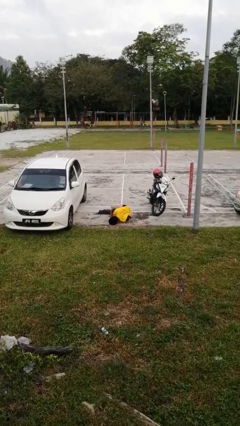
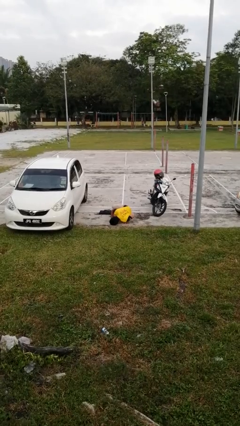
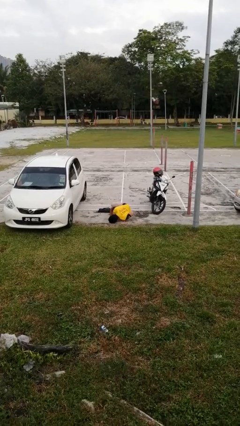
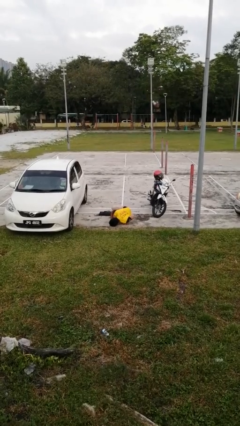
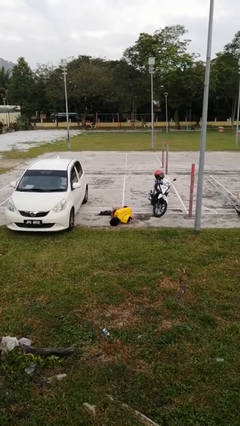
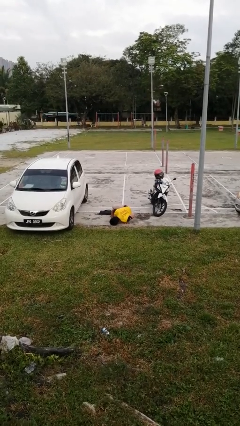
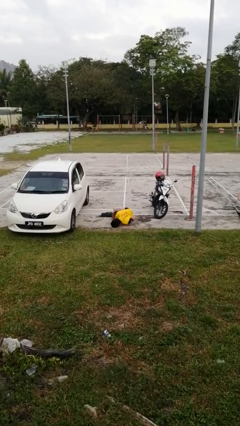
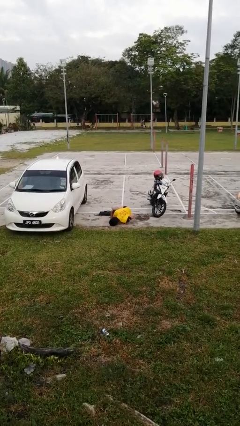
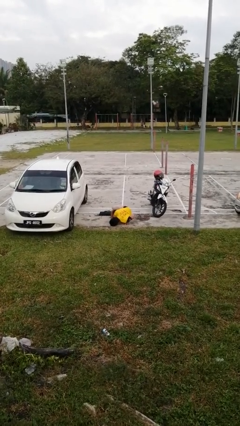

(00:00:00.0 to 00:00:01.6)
person lies down on floor

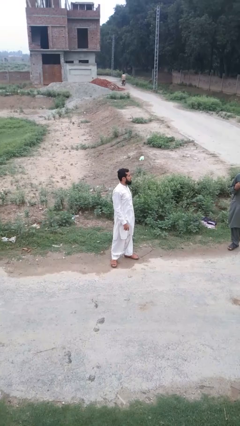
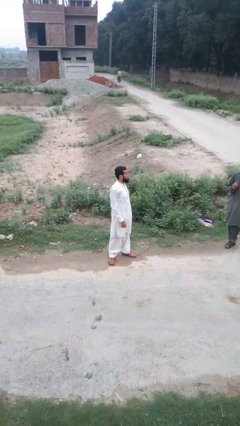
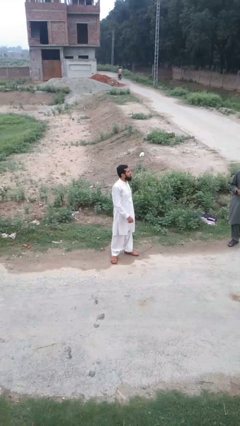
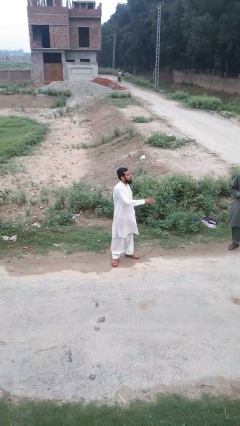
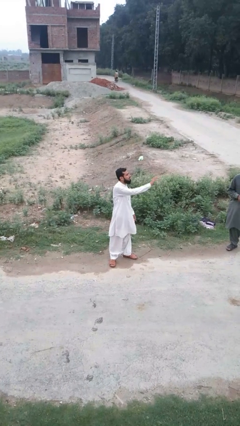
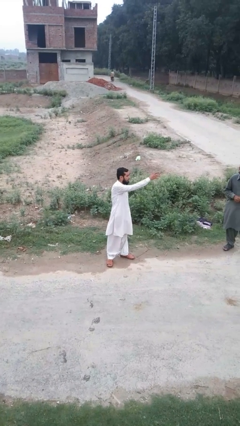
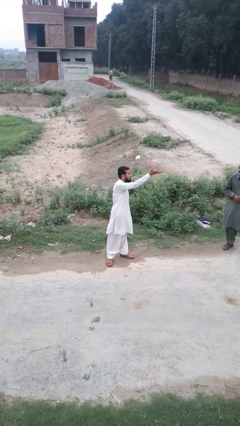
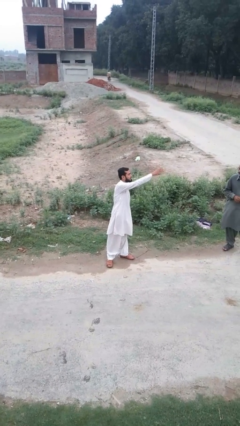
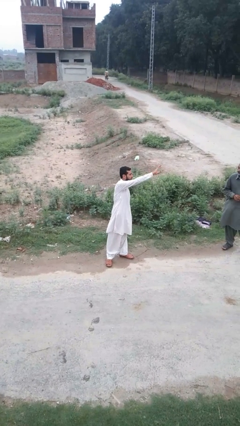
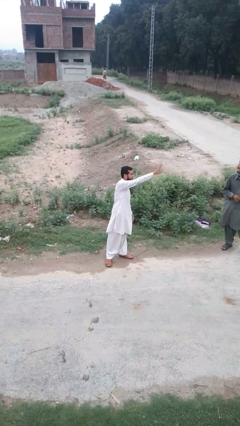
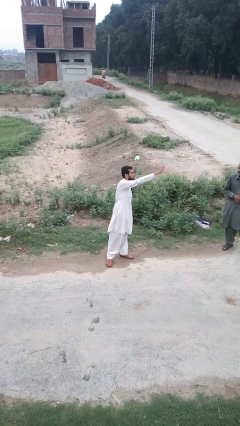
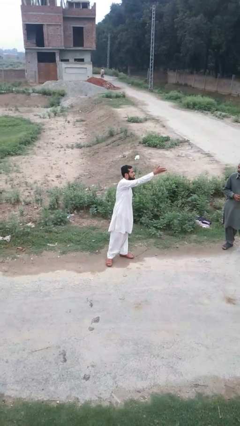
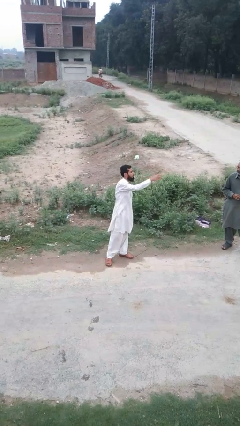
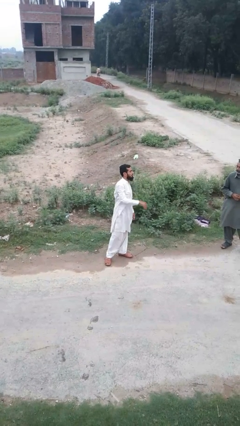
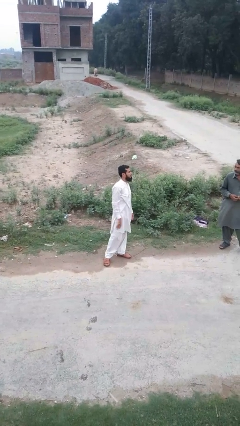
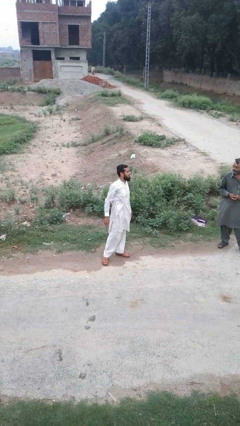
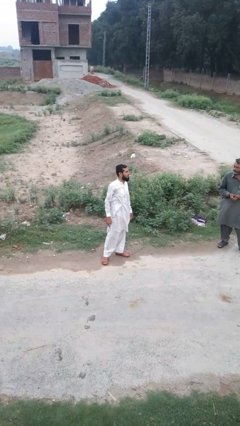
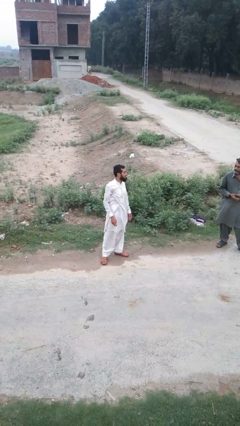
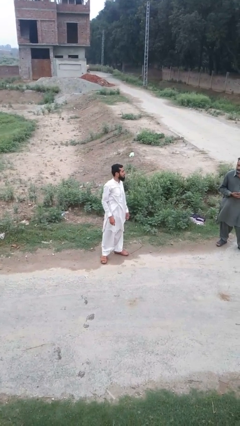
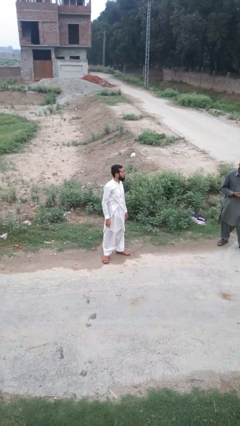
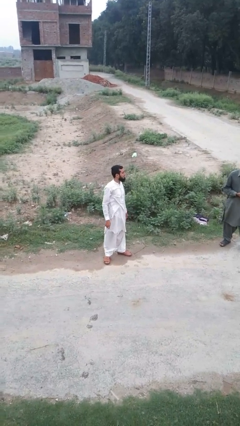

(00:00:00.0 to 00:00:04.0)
person waves at person

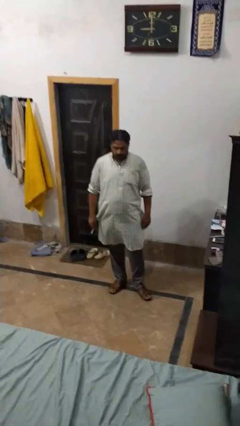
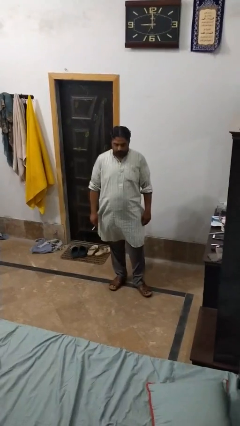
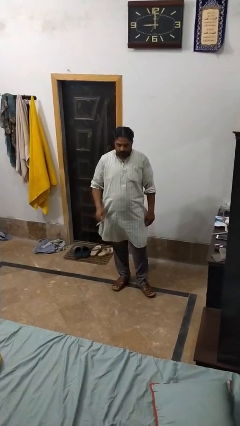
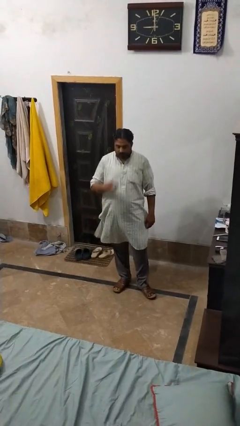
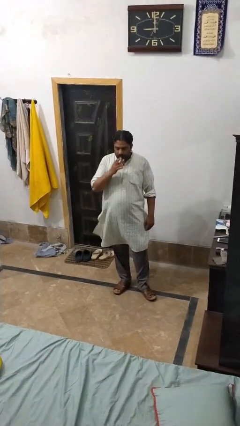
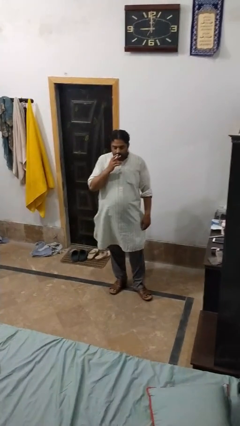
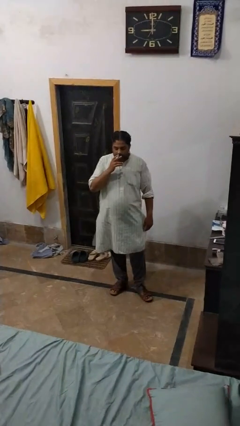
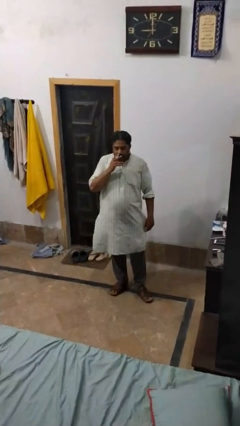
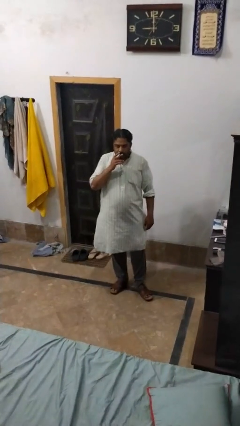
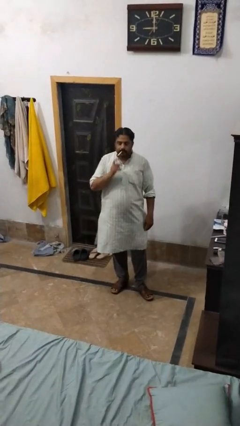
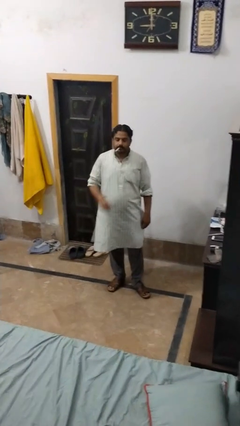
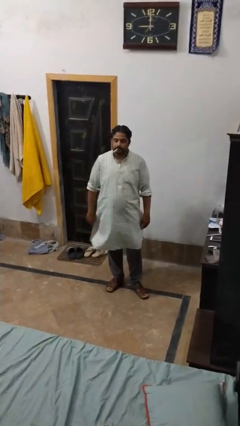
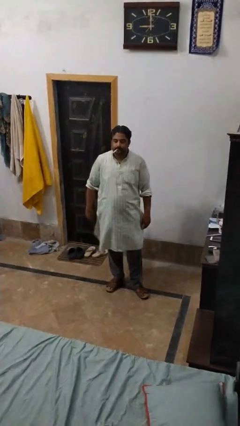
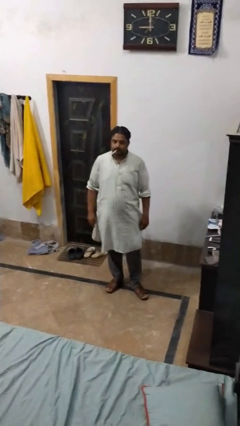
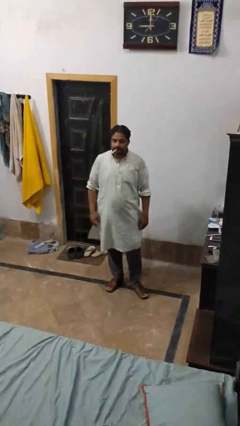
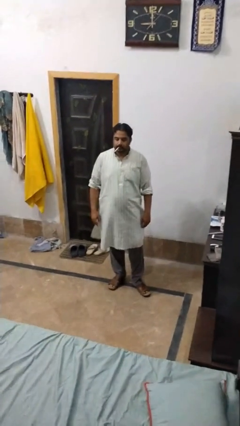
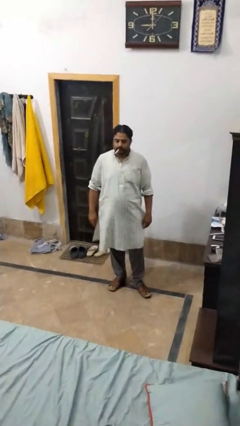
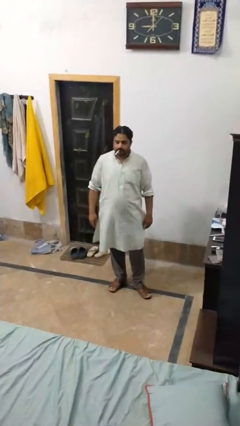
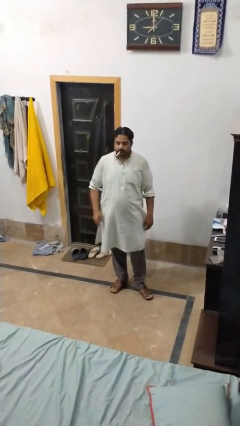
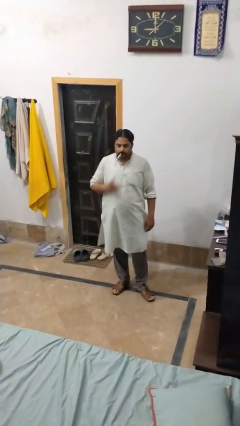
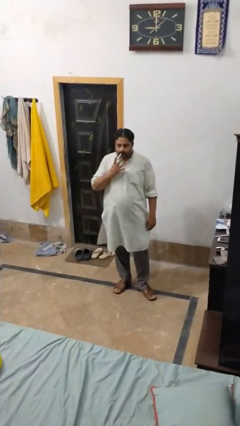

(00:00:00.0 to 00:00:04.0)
person vapes

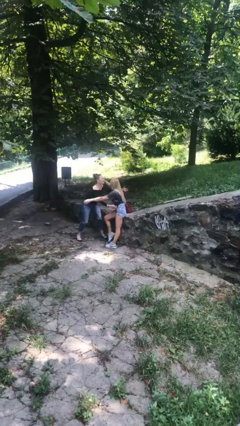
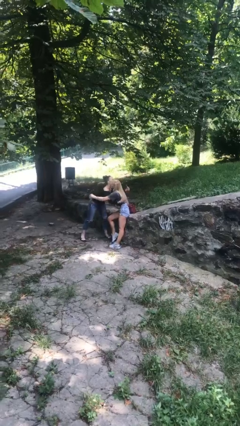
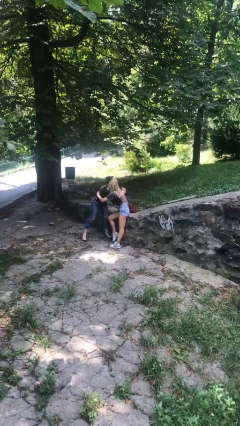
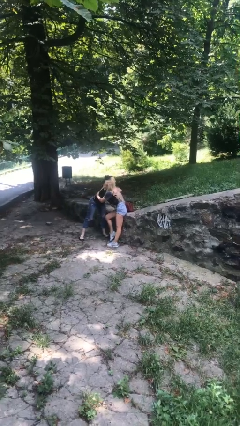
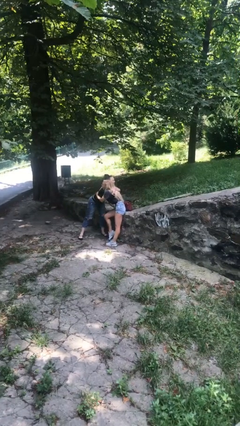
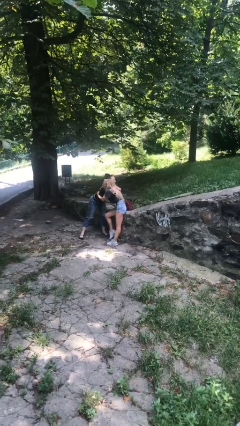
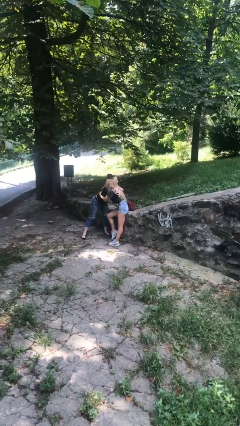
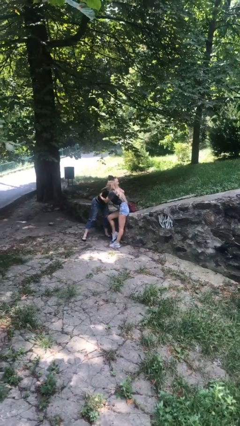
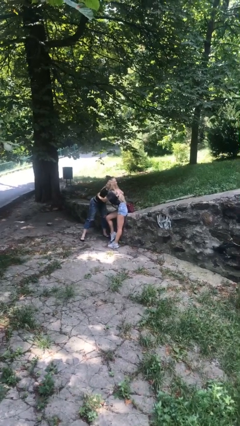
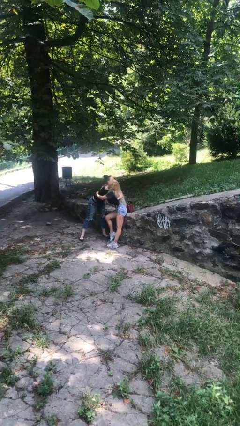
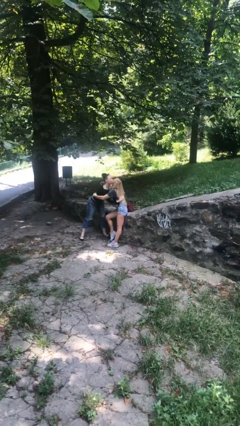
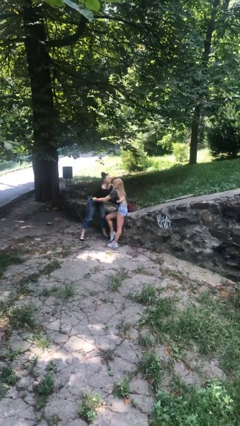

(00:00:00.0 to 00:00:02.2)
person embraces person

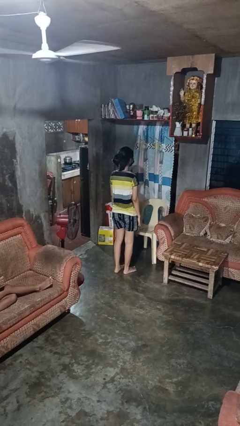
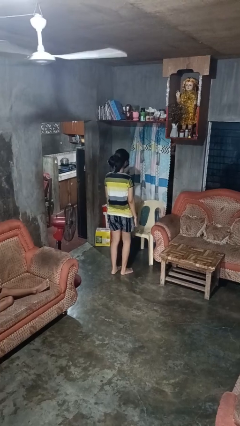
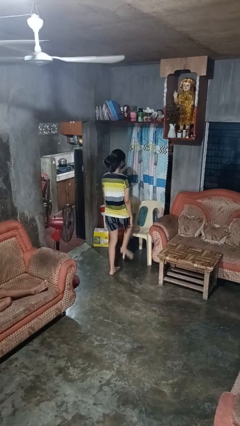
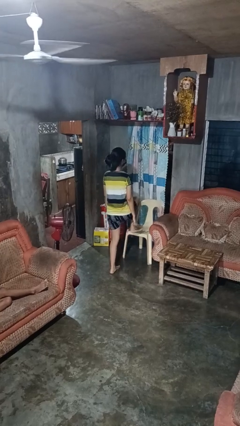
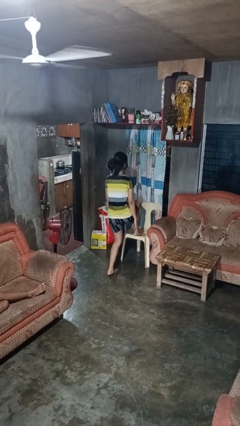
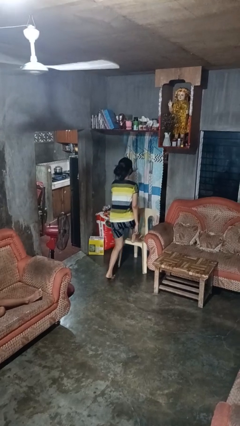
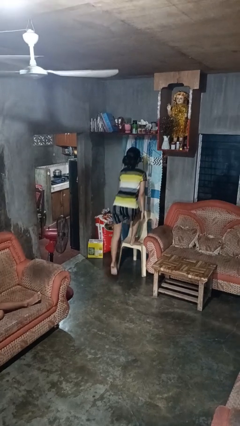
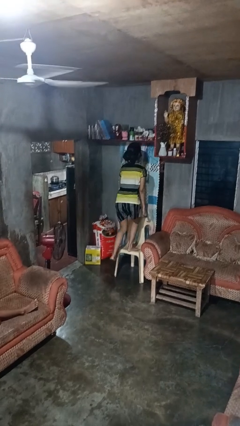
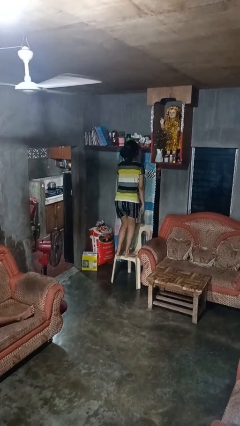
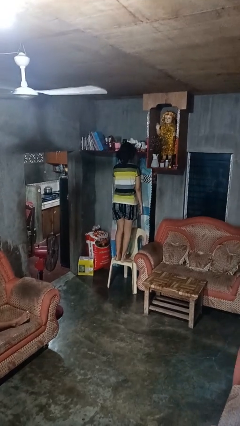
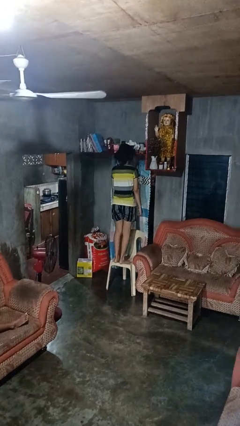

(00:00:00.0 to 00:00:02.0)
person climbs on chair

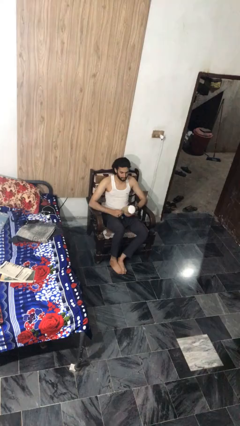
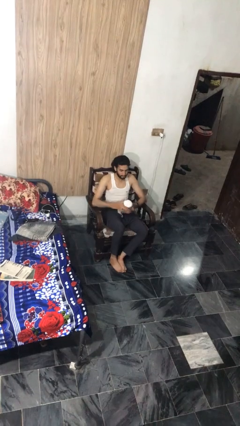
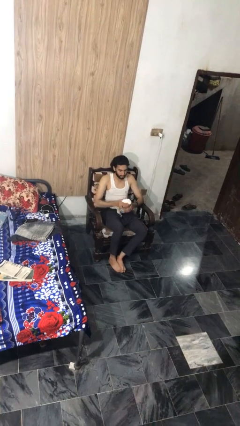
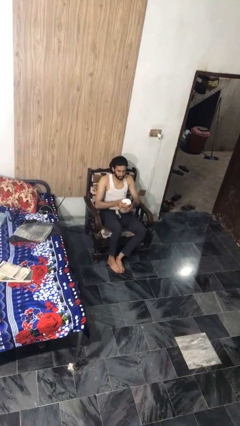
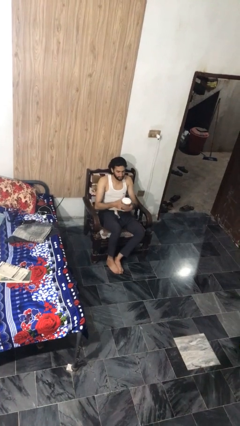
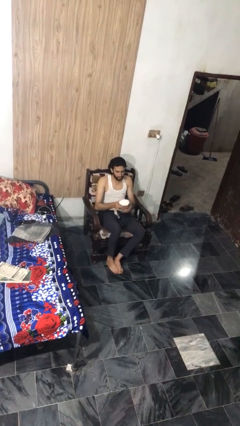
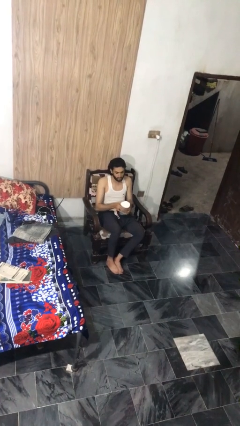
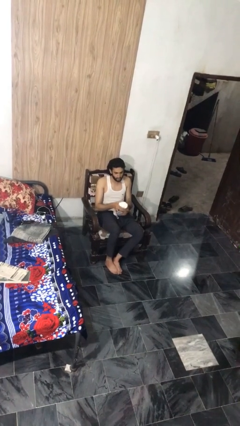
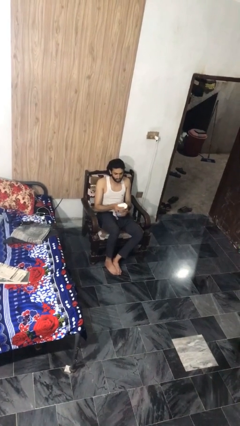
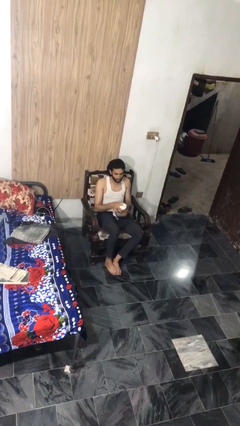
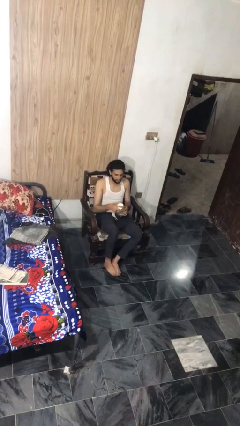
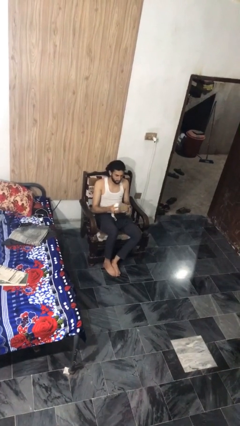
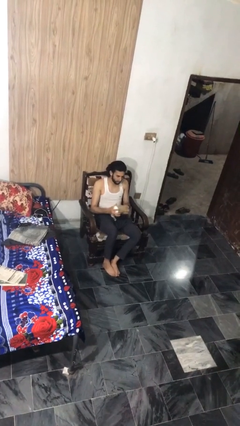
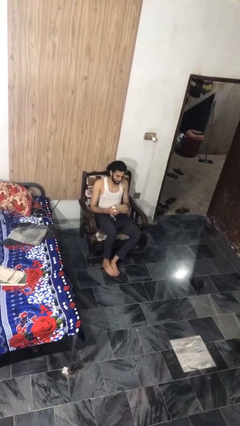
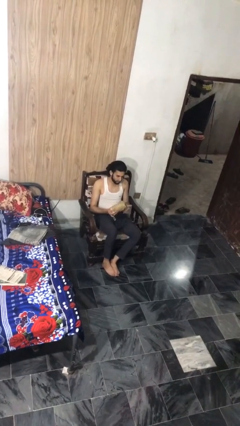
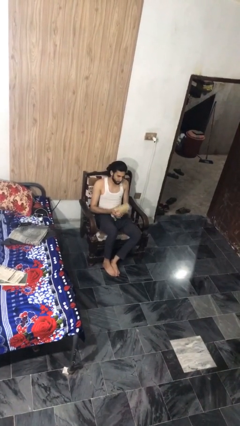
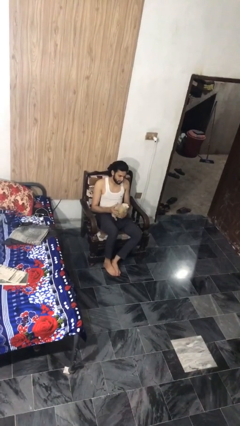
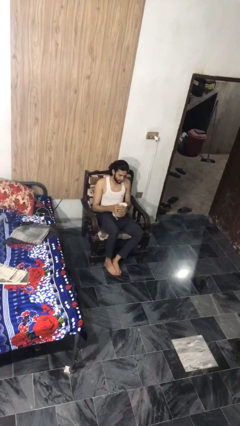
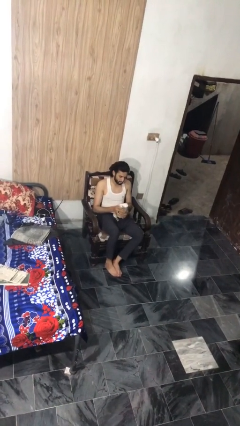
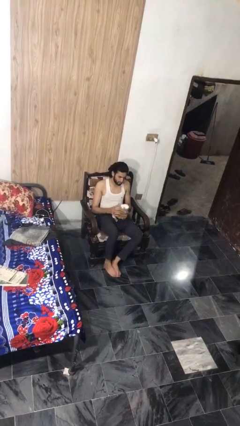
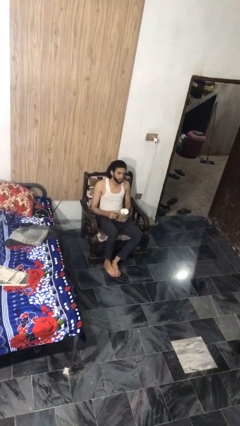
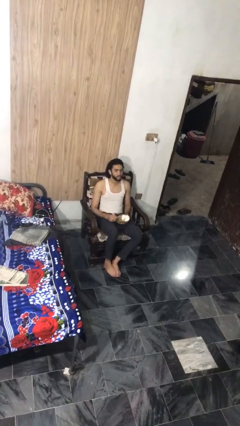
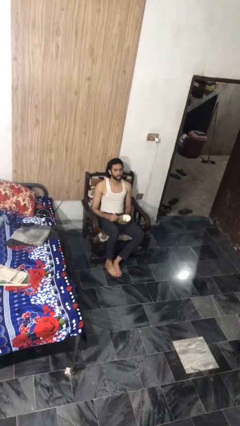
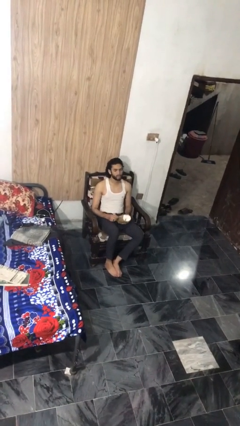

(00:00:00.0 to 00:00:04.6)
person squeezes object
